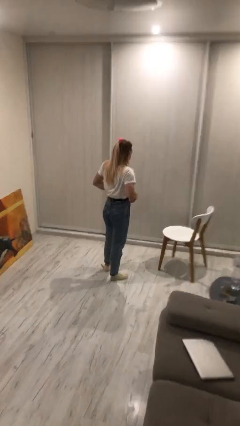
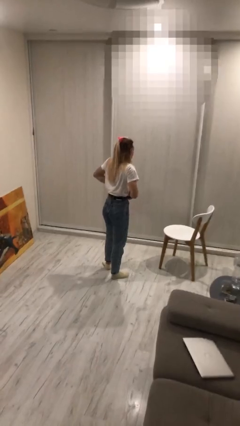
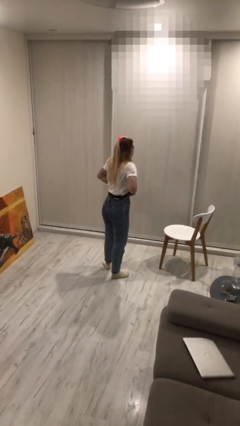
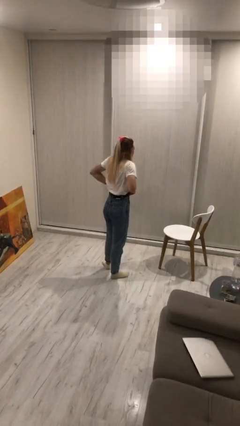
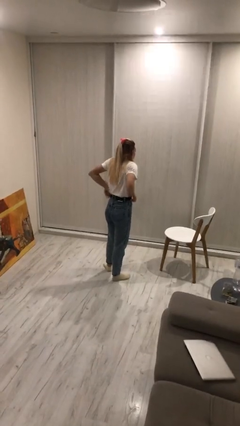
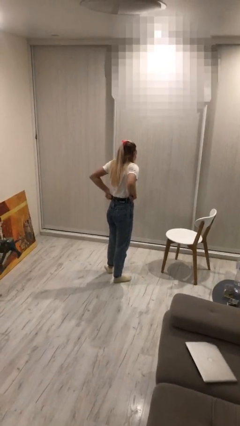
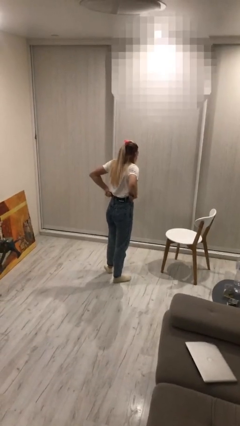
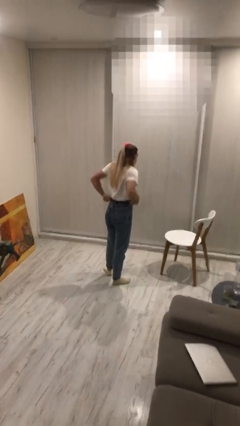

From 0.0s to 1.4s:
person hikes up pants

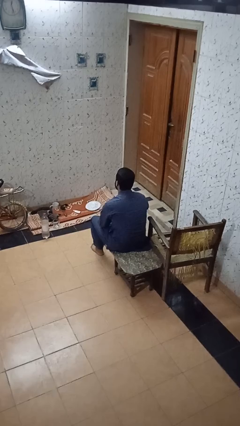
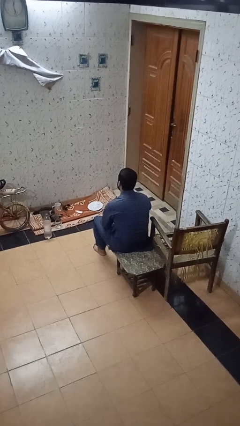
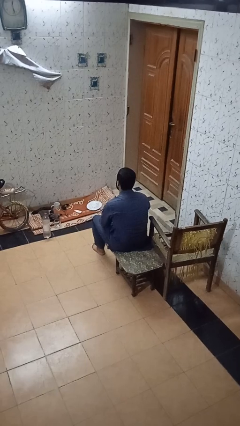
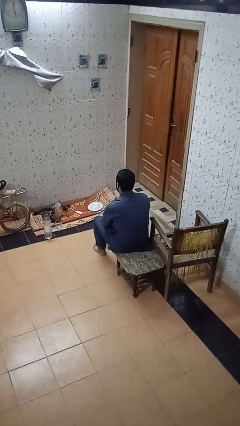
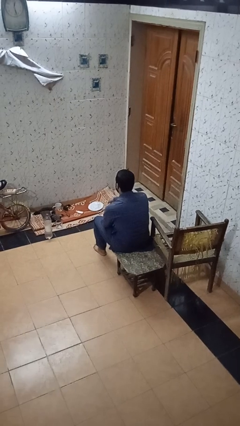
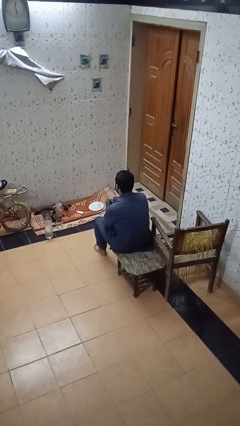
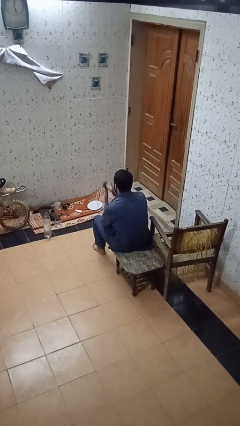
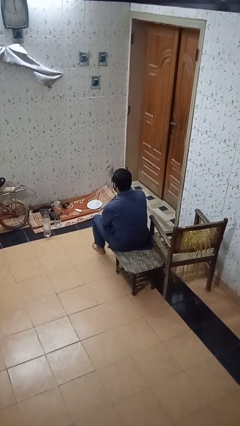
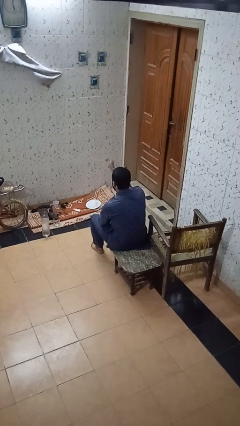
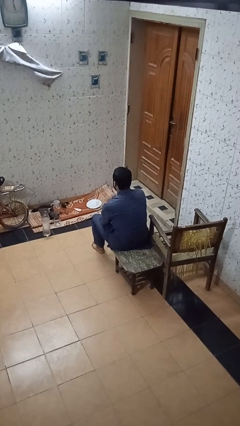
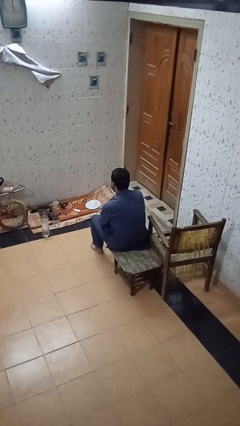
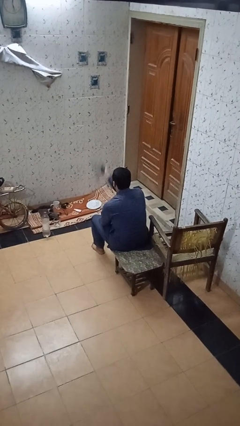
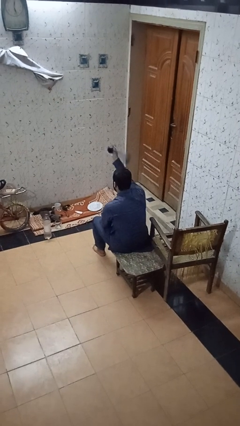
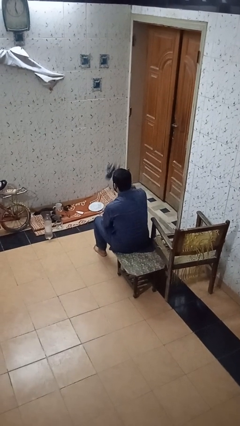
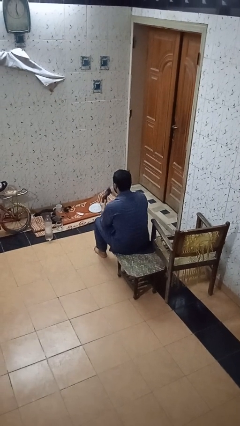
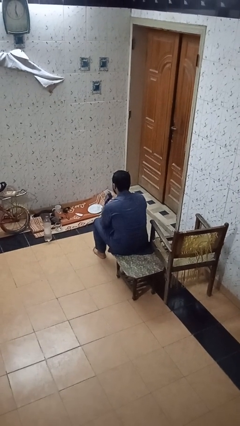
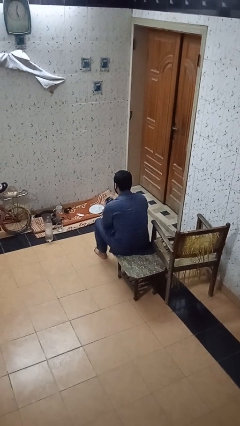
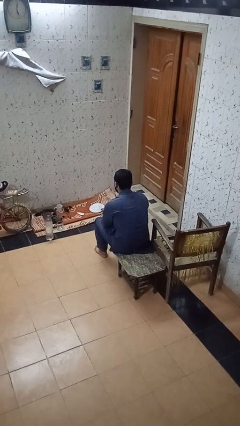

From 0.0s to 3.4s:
person takes off socks

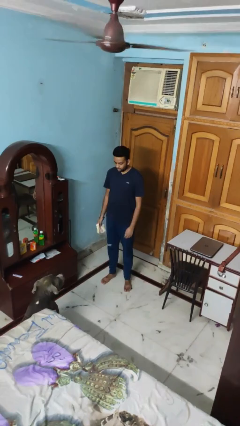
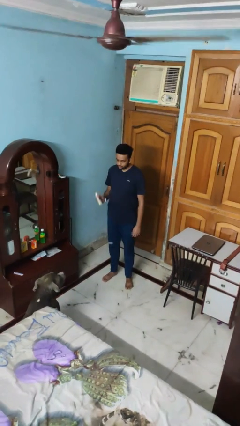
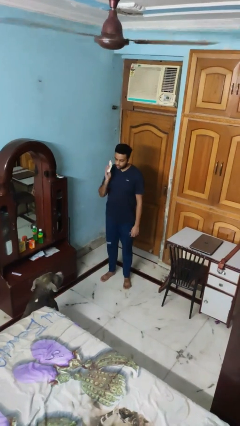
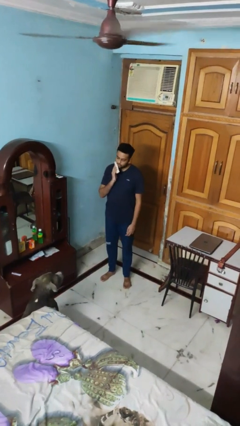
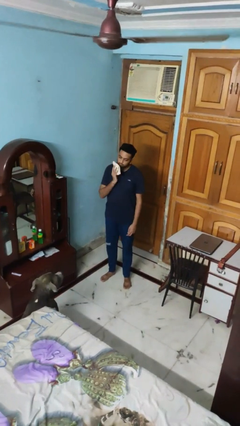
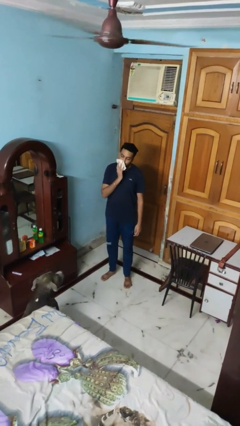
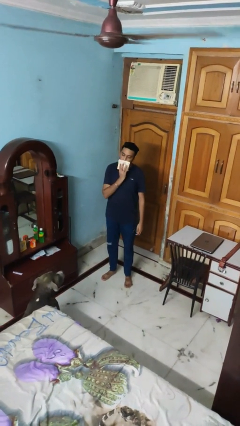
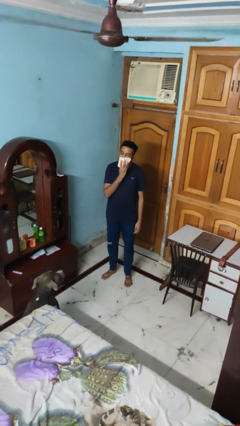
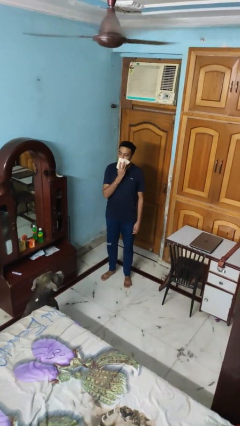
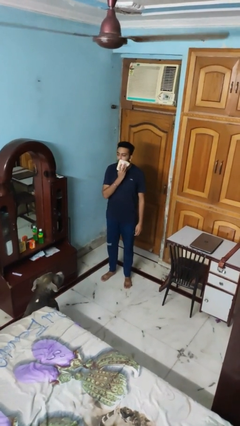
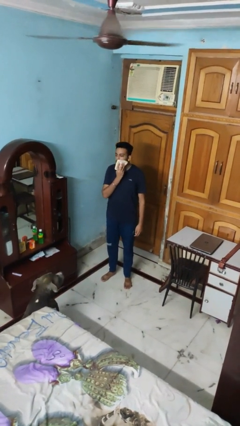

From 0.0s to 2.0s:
person wipes mouth with napkin

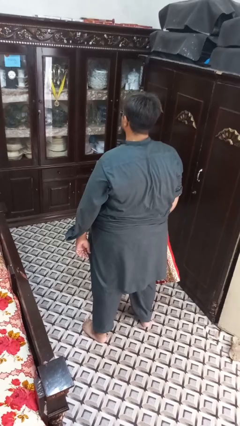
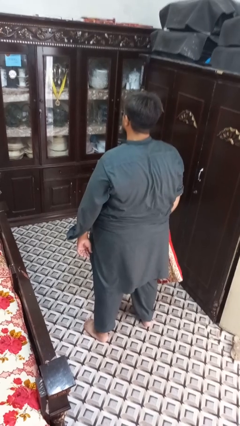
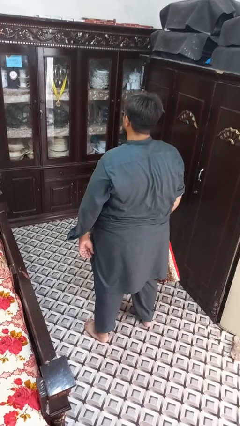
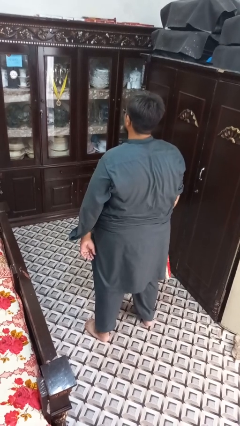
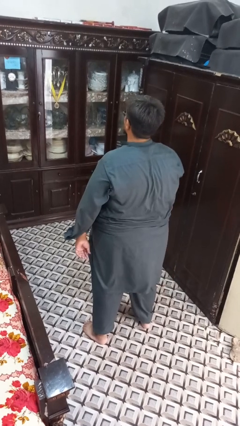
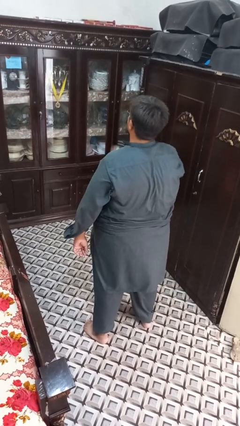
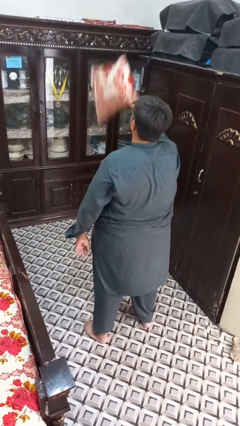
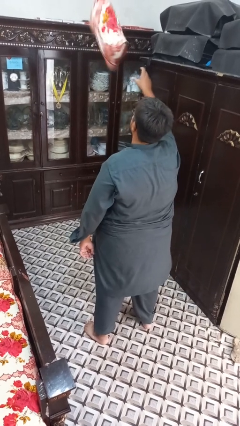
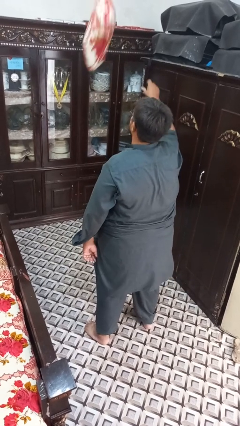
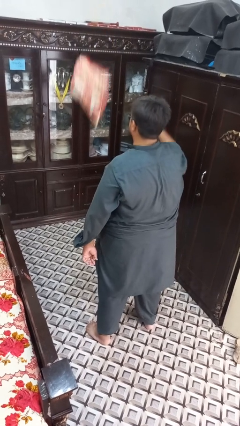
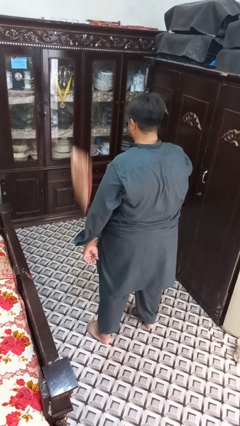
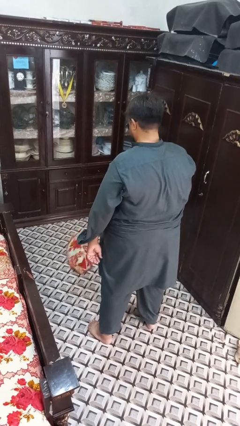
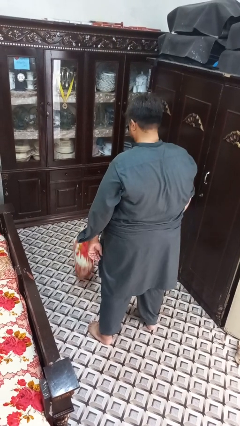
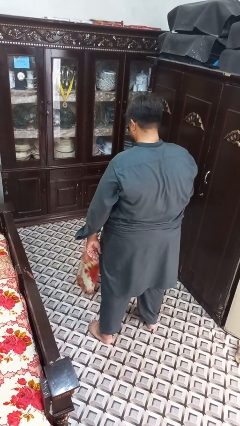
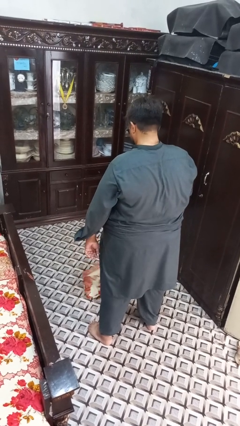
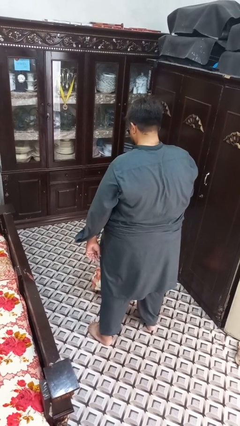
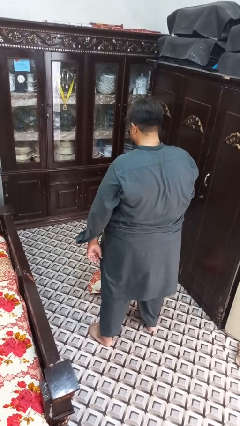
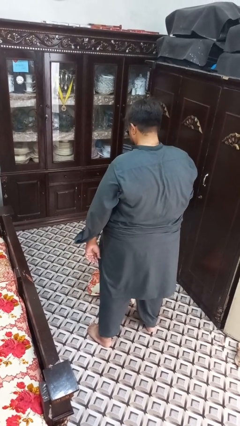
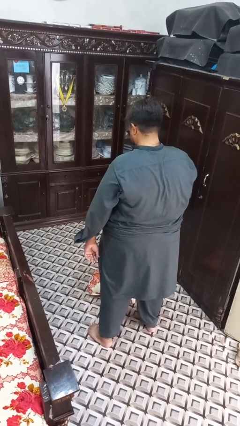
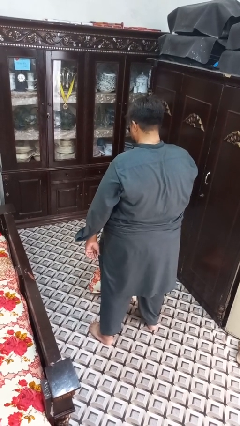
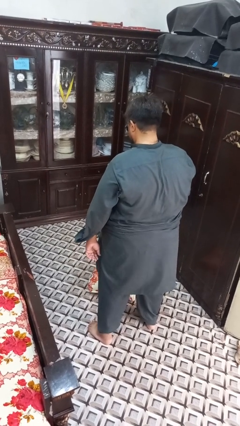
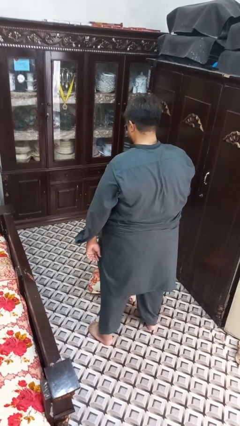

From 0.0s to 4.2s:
person throws object into air

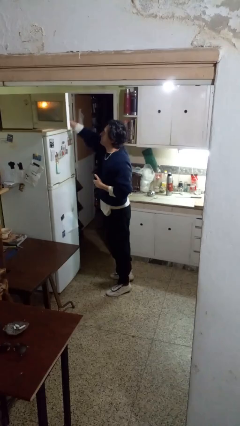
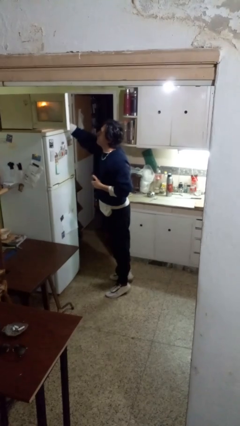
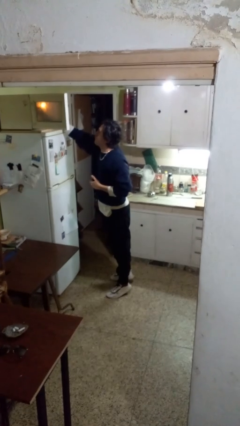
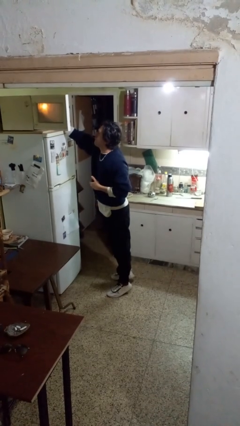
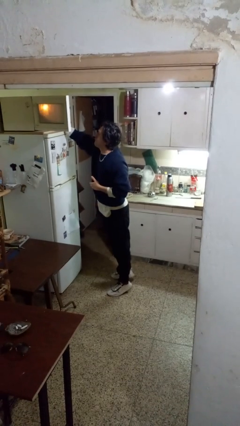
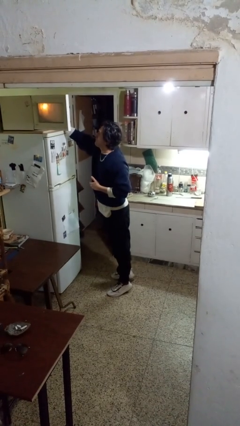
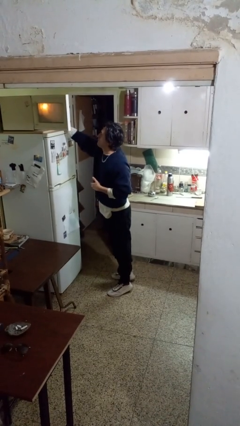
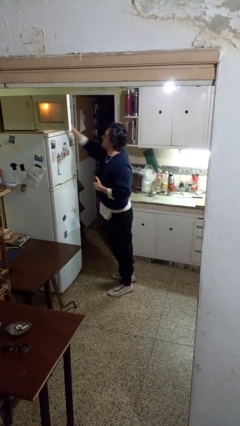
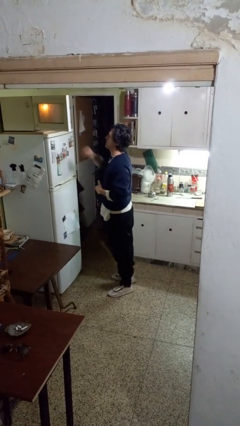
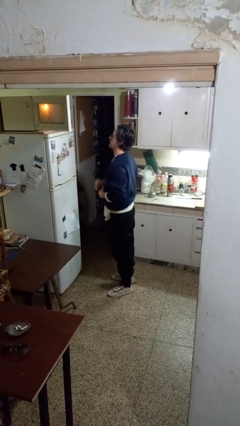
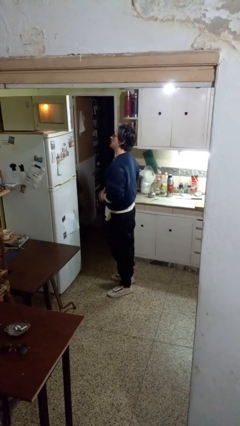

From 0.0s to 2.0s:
person puts object into microwave

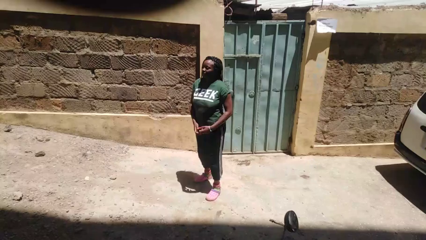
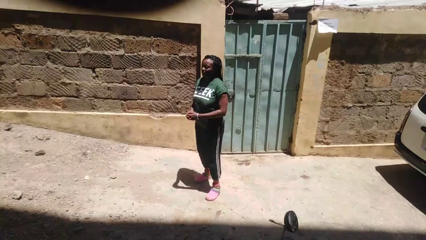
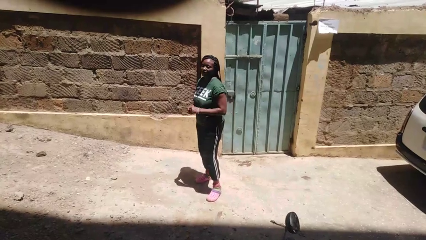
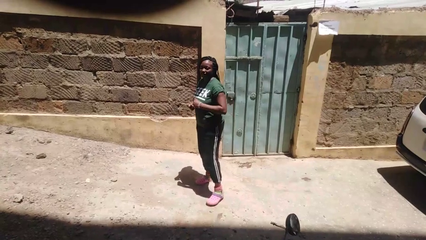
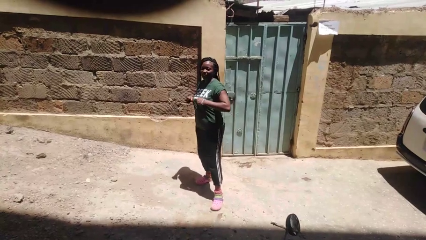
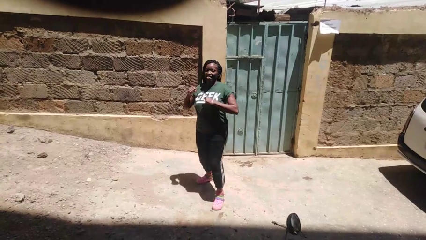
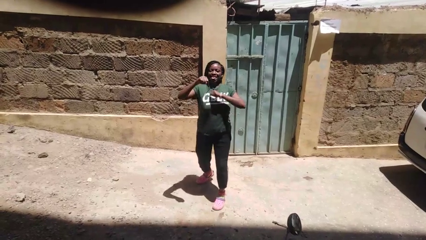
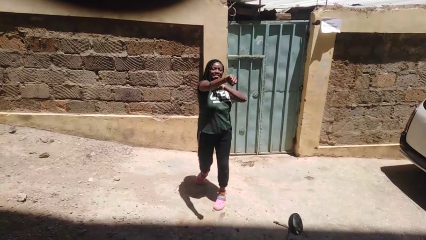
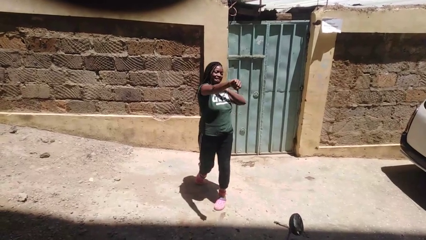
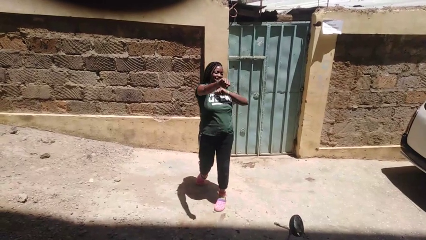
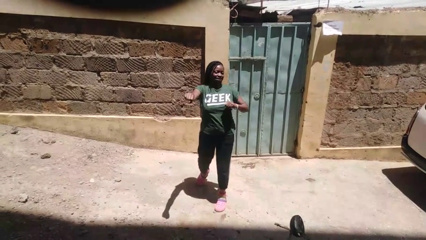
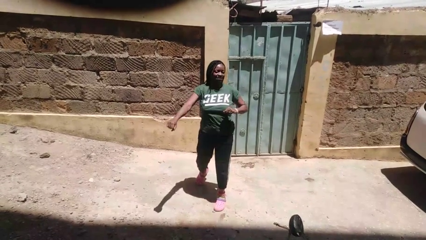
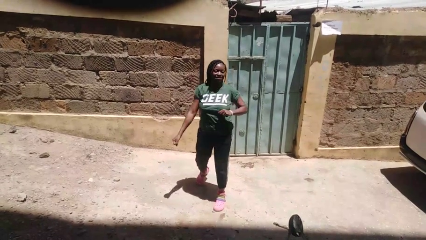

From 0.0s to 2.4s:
person punches

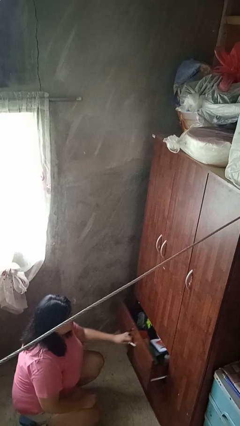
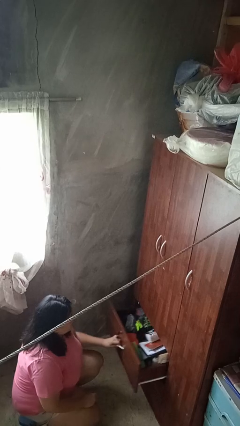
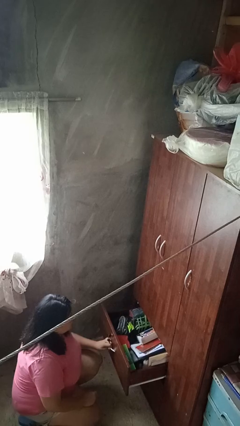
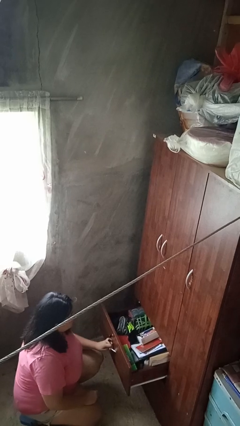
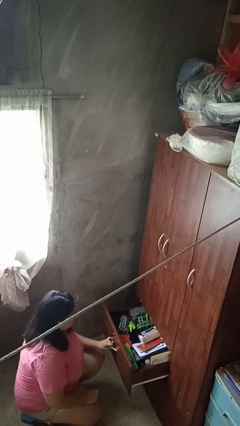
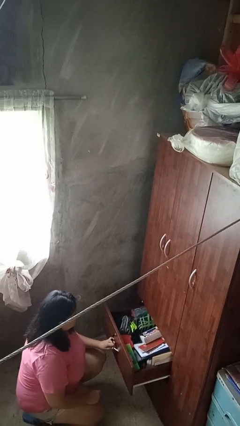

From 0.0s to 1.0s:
person opens dresser drawer

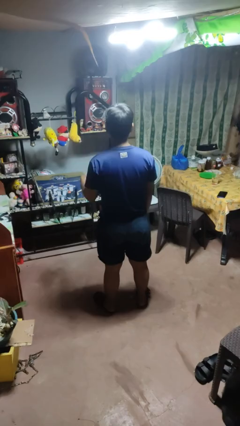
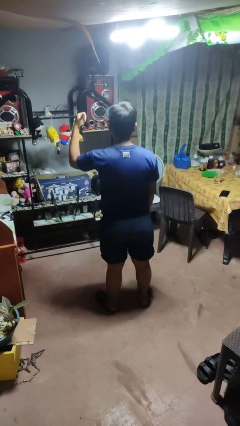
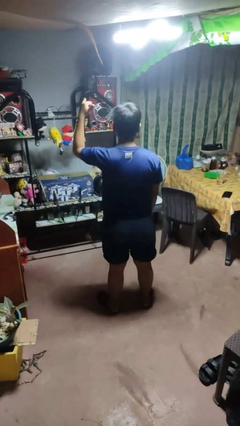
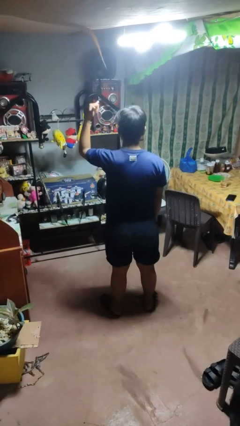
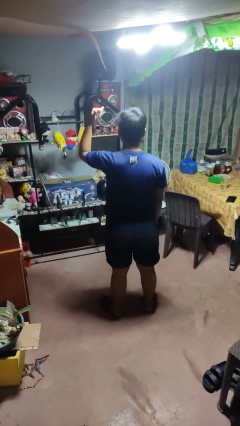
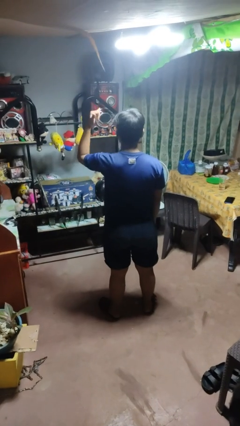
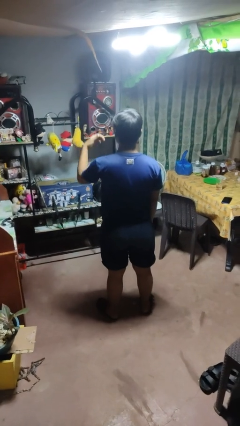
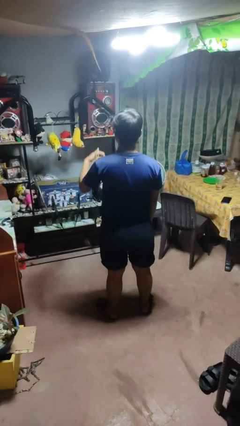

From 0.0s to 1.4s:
person gestures hang loose
